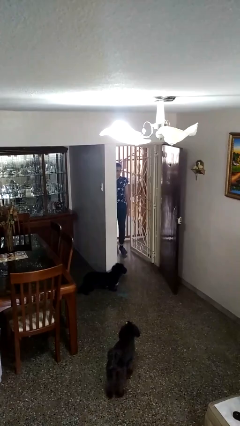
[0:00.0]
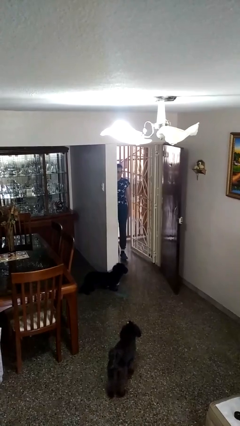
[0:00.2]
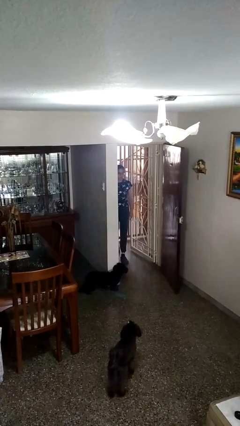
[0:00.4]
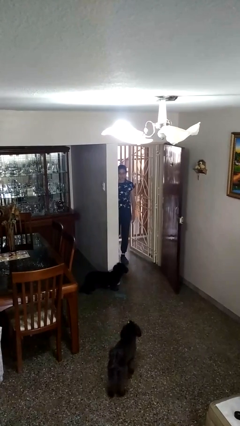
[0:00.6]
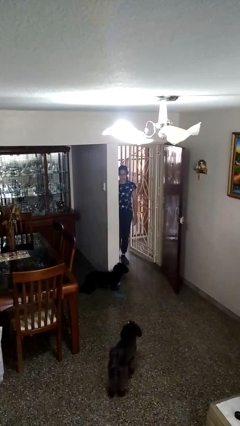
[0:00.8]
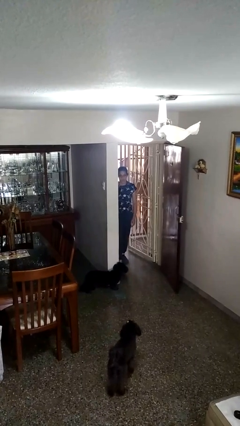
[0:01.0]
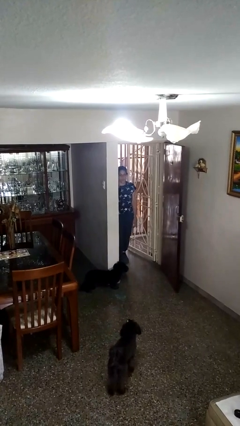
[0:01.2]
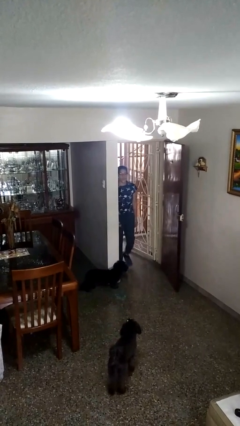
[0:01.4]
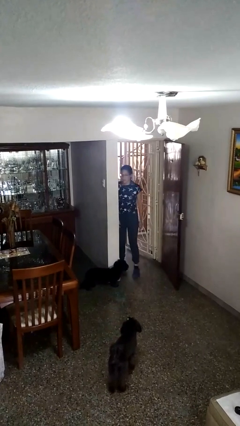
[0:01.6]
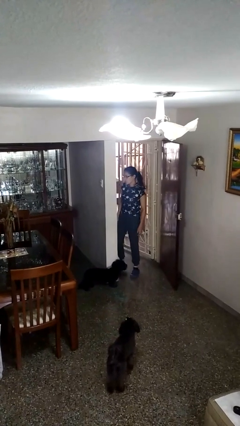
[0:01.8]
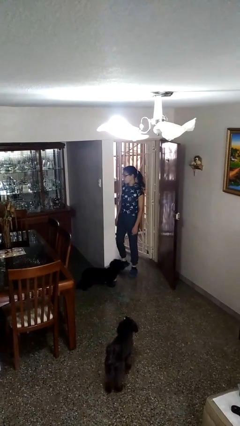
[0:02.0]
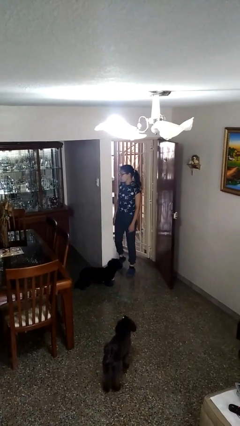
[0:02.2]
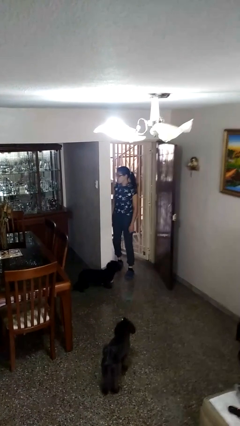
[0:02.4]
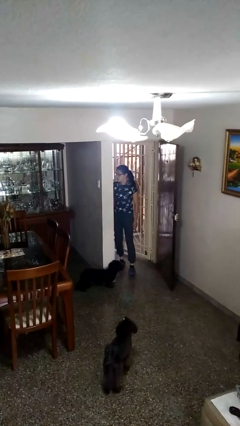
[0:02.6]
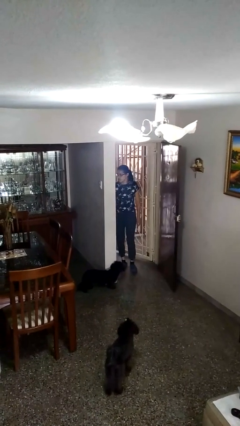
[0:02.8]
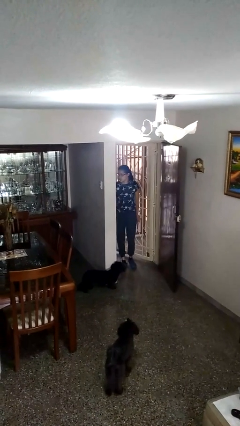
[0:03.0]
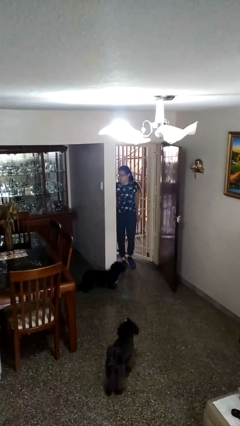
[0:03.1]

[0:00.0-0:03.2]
person bumps into wall

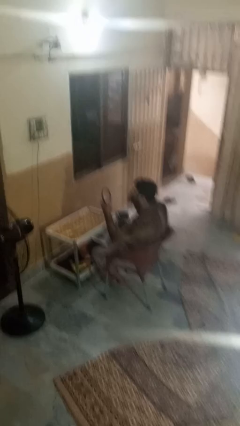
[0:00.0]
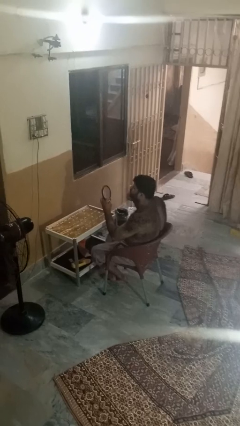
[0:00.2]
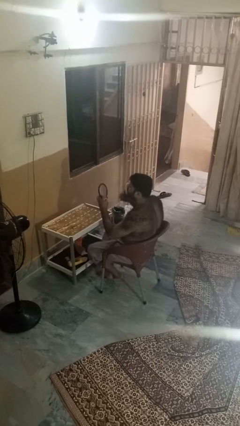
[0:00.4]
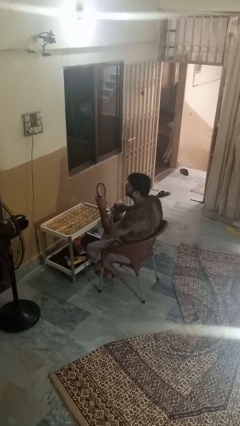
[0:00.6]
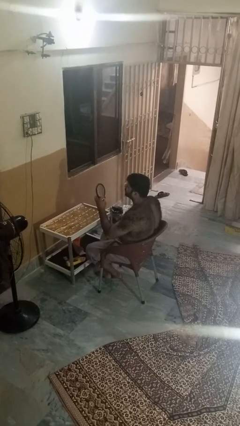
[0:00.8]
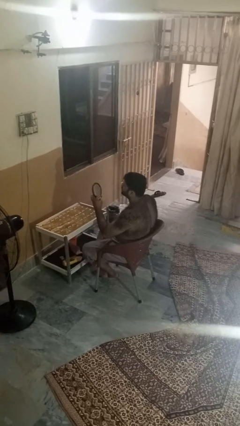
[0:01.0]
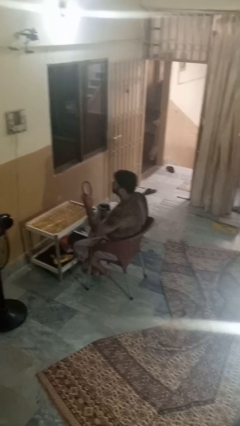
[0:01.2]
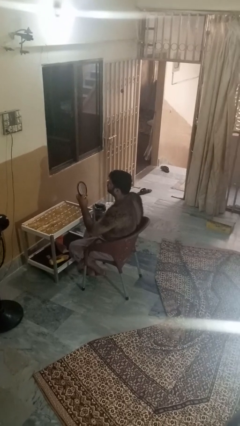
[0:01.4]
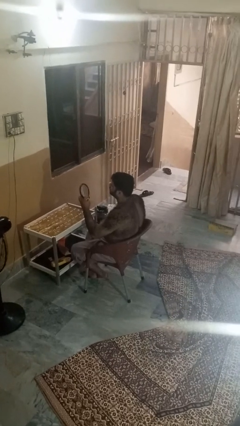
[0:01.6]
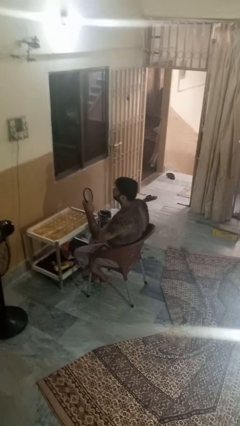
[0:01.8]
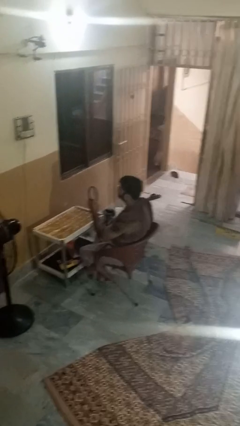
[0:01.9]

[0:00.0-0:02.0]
person applies lip makeup

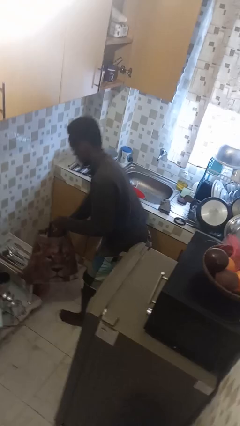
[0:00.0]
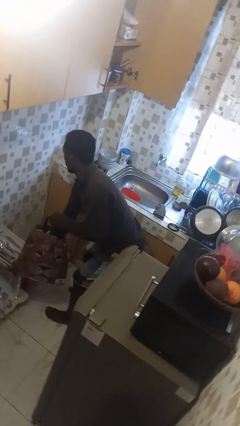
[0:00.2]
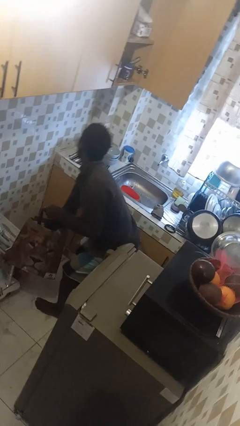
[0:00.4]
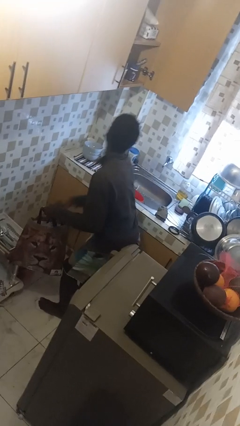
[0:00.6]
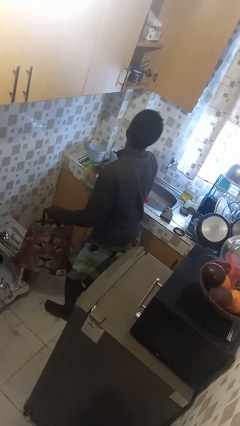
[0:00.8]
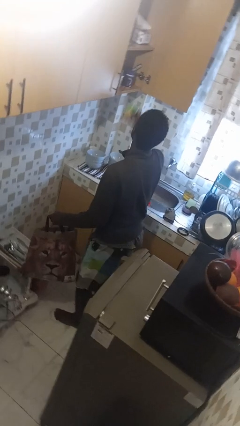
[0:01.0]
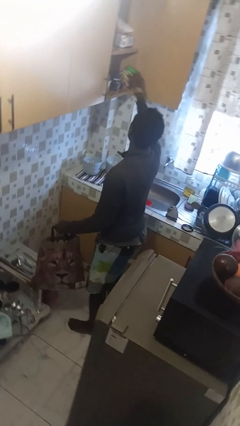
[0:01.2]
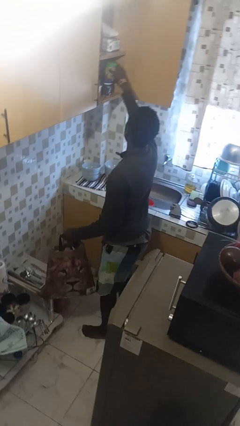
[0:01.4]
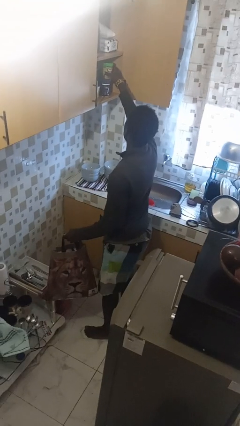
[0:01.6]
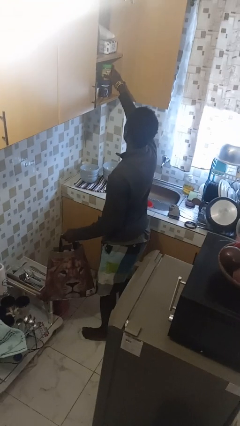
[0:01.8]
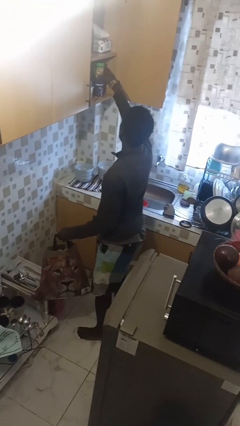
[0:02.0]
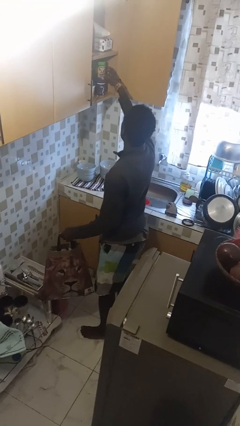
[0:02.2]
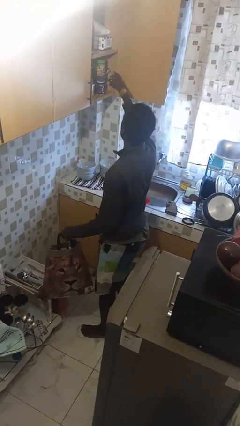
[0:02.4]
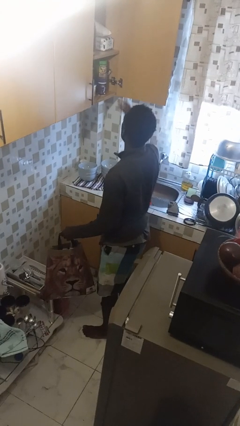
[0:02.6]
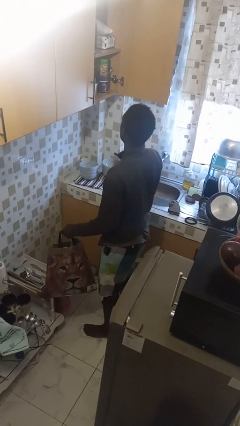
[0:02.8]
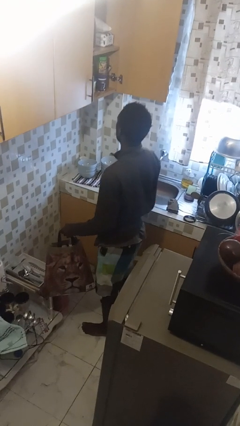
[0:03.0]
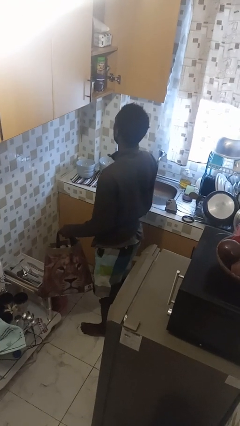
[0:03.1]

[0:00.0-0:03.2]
person loads groceries into cabinet

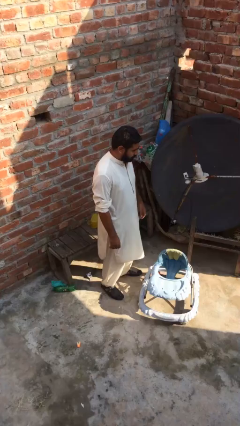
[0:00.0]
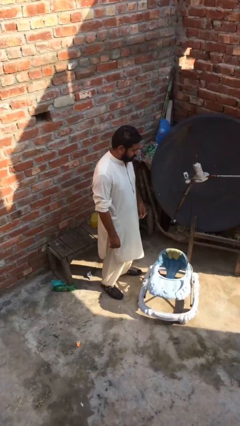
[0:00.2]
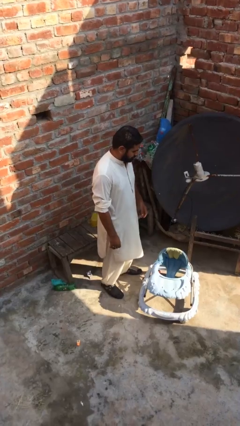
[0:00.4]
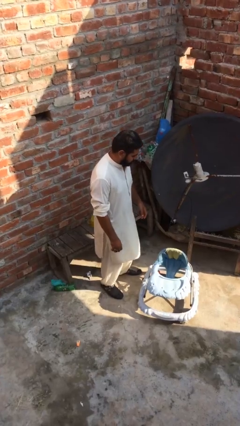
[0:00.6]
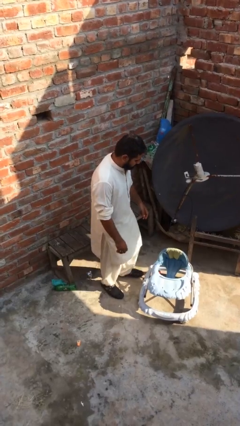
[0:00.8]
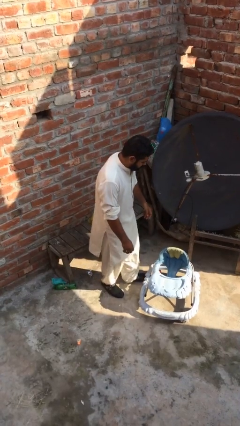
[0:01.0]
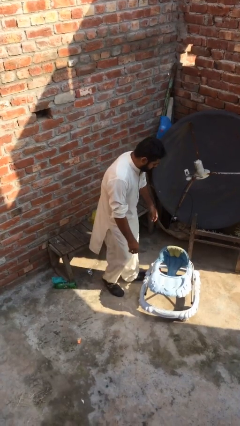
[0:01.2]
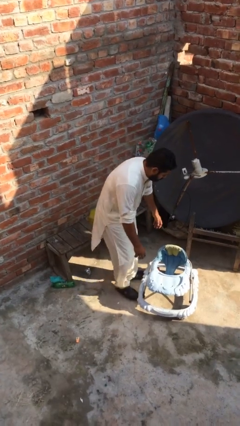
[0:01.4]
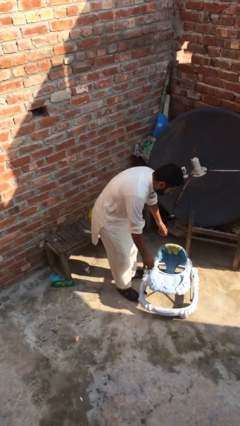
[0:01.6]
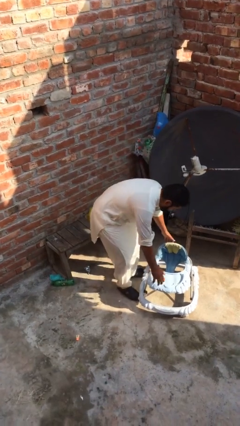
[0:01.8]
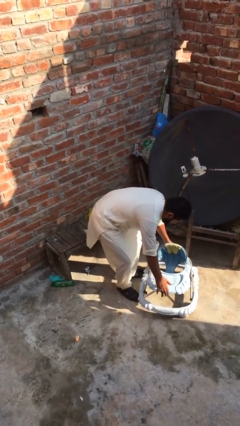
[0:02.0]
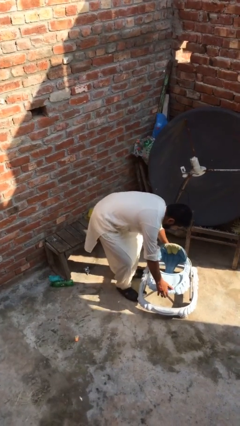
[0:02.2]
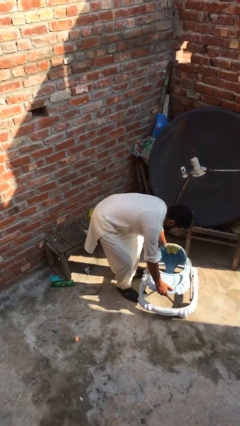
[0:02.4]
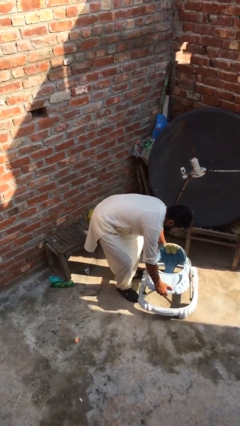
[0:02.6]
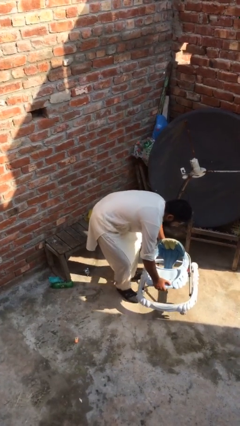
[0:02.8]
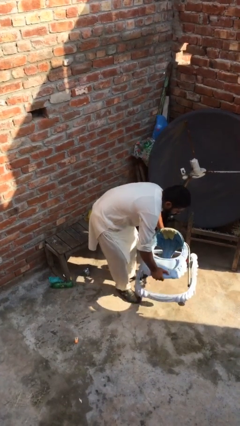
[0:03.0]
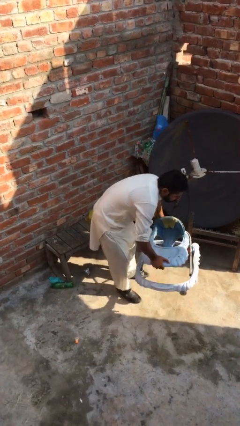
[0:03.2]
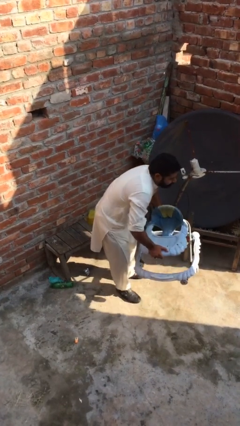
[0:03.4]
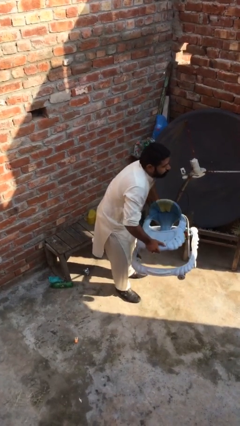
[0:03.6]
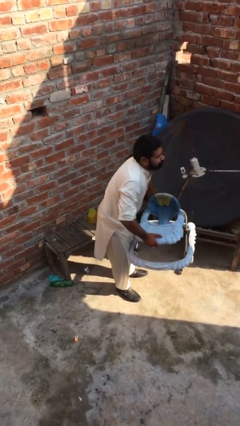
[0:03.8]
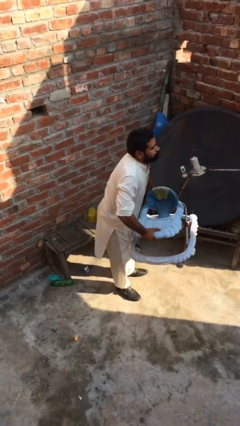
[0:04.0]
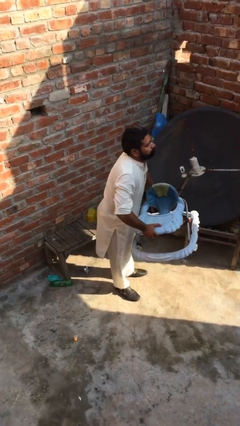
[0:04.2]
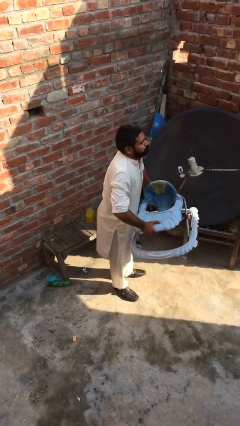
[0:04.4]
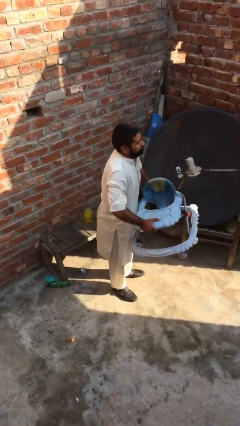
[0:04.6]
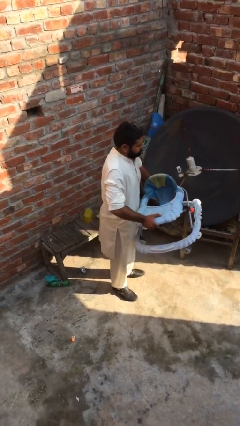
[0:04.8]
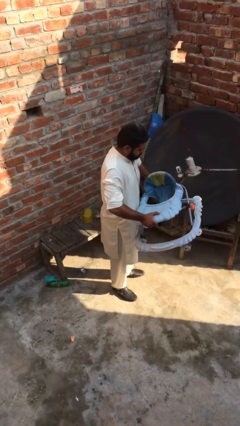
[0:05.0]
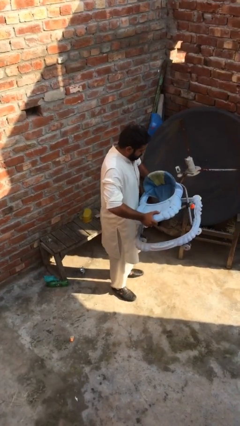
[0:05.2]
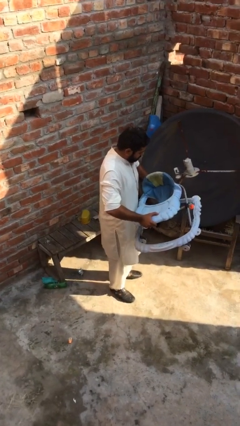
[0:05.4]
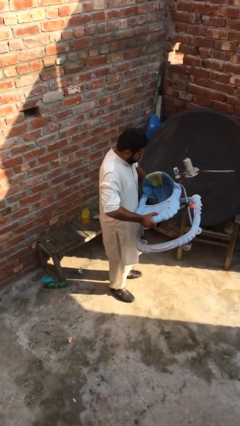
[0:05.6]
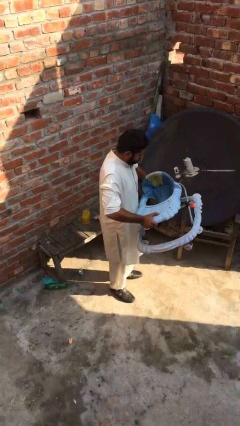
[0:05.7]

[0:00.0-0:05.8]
person picks up object from floor

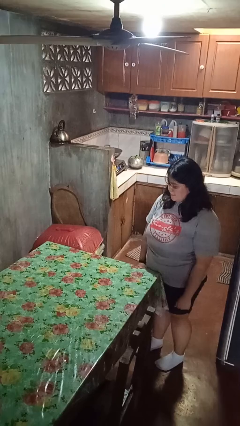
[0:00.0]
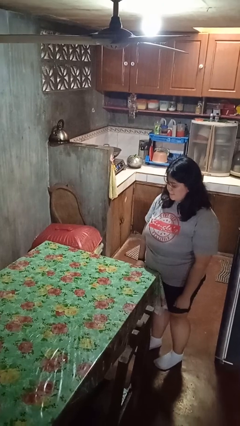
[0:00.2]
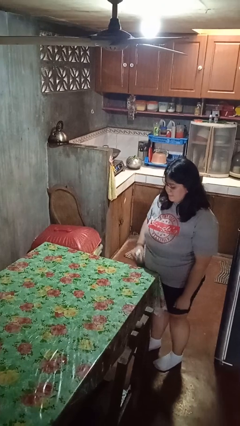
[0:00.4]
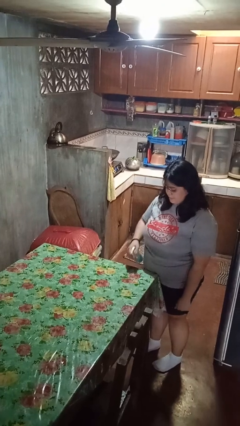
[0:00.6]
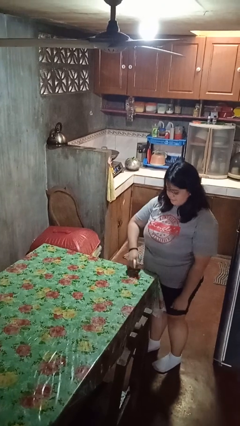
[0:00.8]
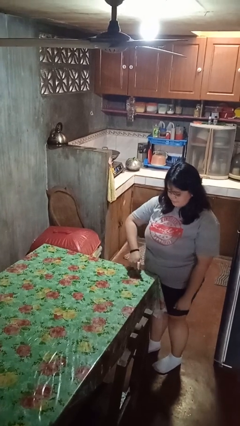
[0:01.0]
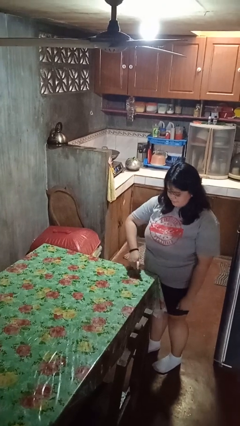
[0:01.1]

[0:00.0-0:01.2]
person sprays from bottle

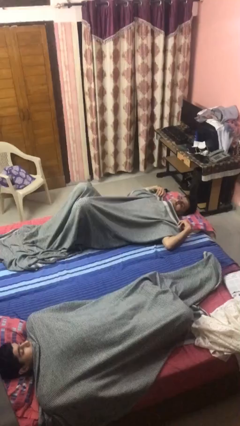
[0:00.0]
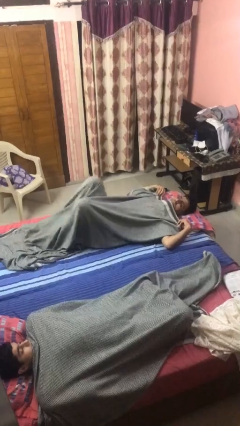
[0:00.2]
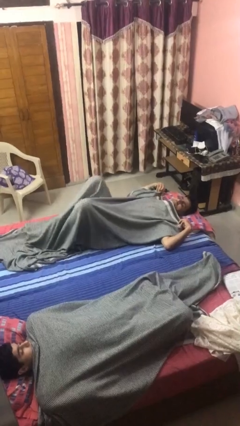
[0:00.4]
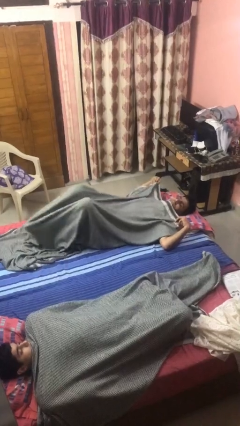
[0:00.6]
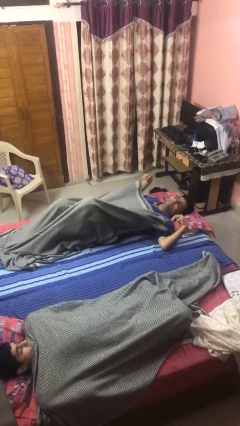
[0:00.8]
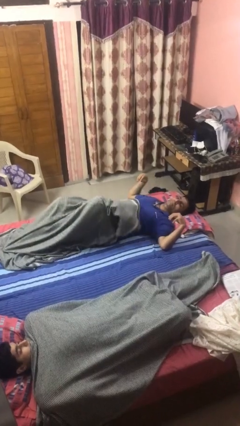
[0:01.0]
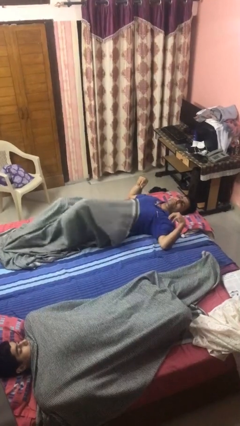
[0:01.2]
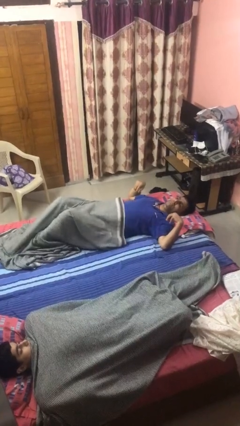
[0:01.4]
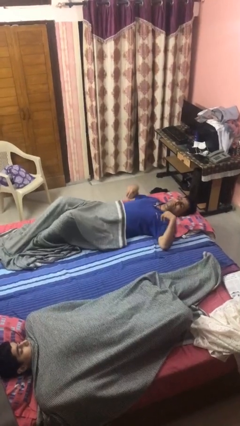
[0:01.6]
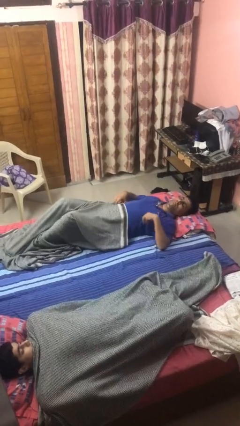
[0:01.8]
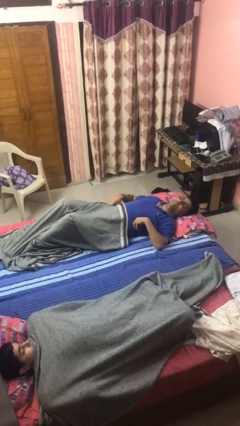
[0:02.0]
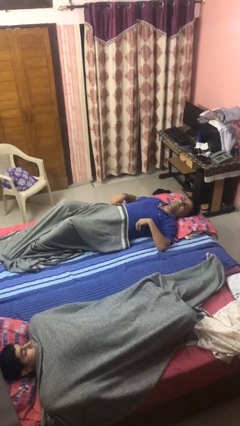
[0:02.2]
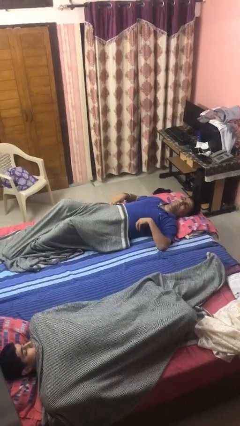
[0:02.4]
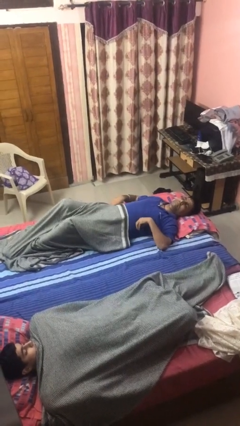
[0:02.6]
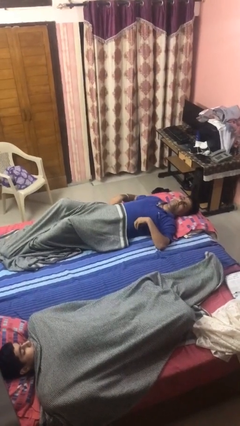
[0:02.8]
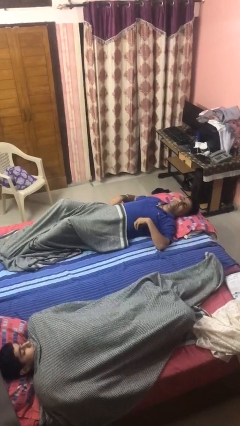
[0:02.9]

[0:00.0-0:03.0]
person uncovers with bedsheets
